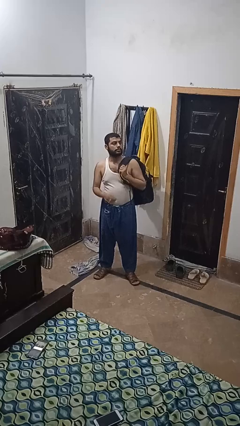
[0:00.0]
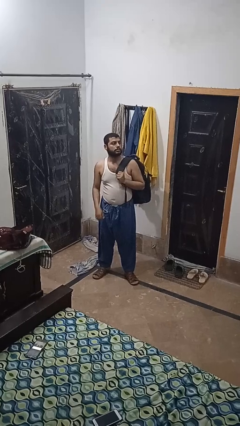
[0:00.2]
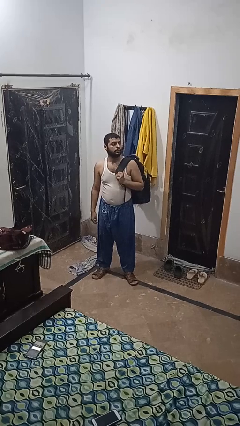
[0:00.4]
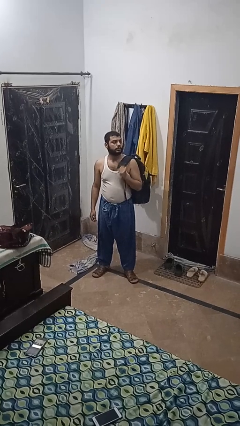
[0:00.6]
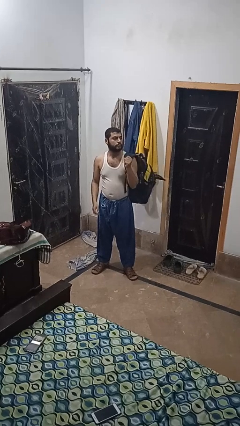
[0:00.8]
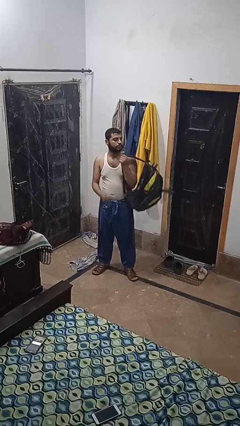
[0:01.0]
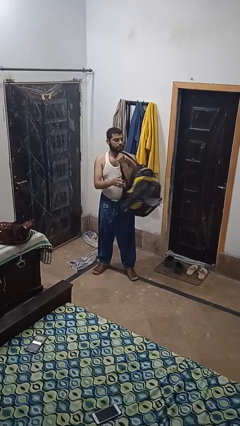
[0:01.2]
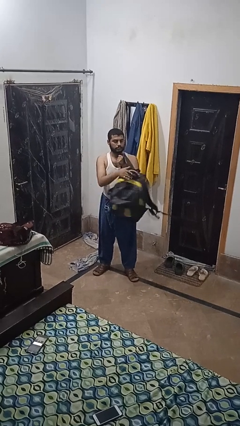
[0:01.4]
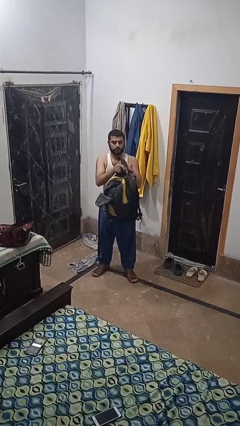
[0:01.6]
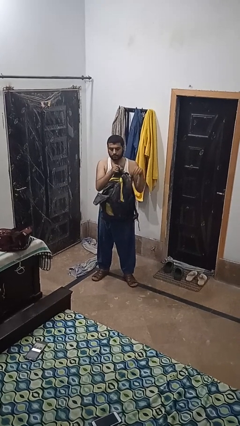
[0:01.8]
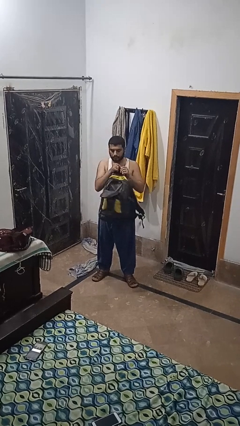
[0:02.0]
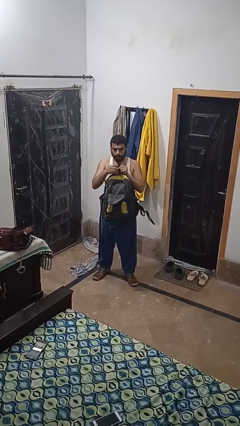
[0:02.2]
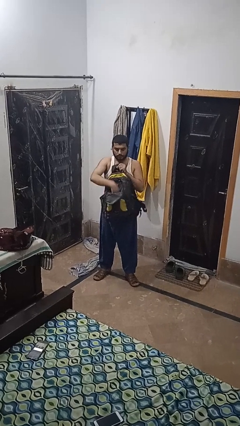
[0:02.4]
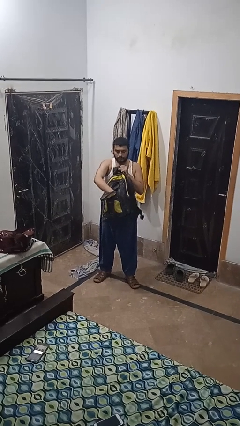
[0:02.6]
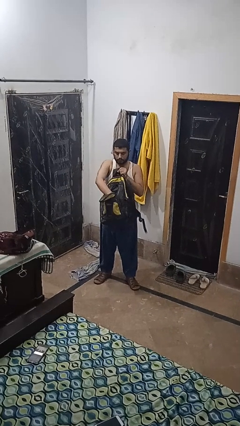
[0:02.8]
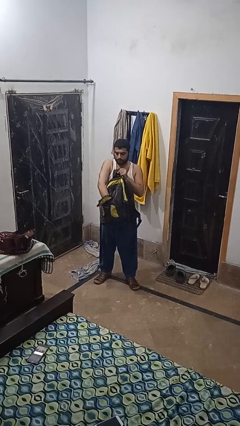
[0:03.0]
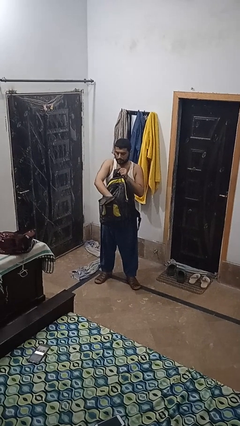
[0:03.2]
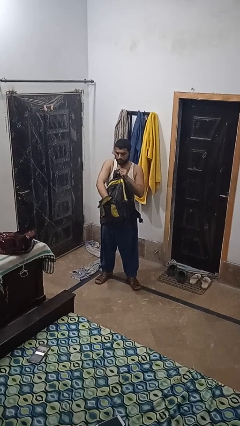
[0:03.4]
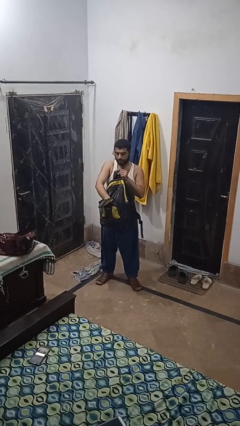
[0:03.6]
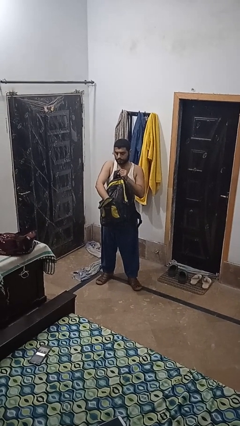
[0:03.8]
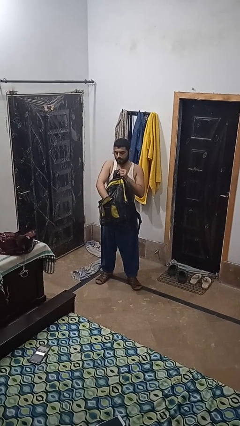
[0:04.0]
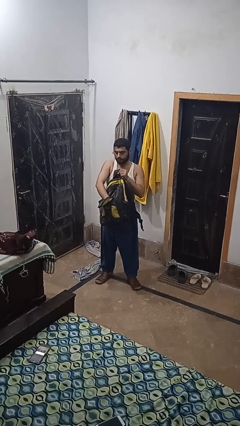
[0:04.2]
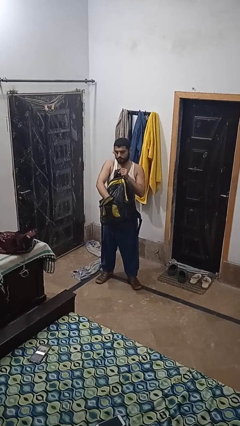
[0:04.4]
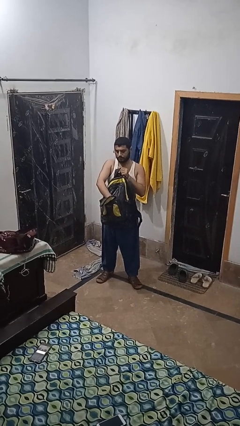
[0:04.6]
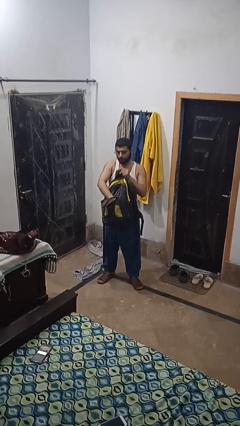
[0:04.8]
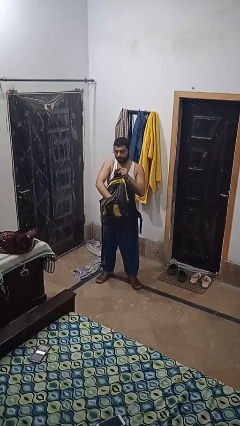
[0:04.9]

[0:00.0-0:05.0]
person searches in backpack

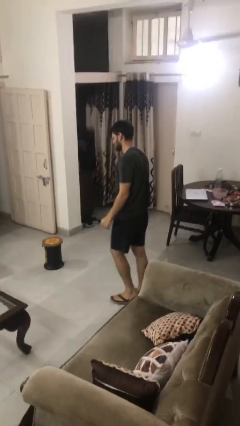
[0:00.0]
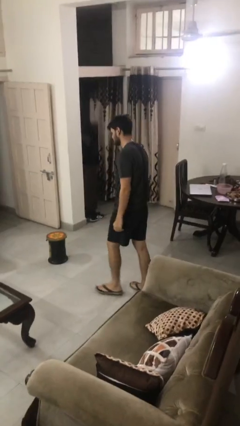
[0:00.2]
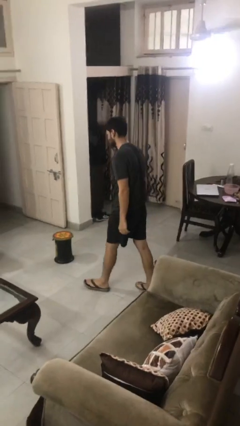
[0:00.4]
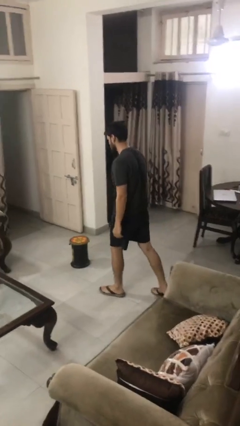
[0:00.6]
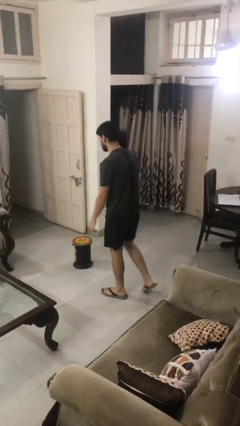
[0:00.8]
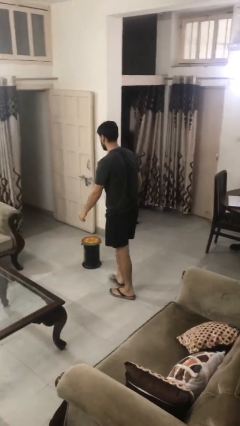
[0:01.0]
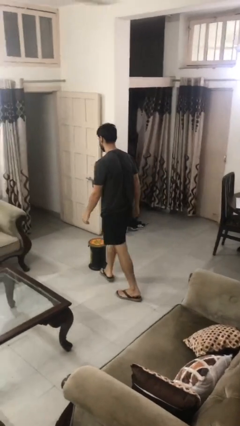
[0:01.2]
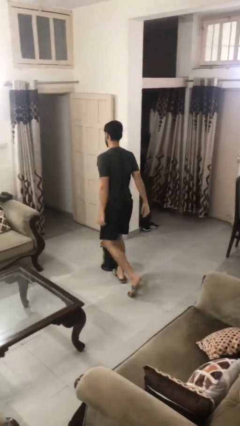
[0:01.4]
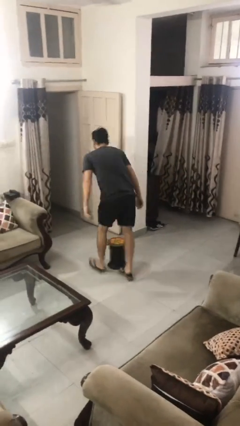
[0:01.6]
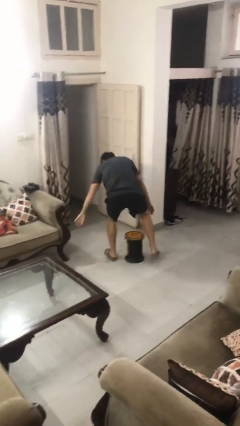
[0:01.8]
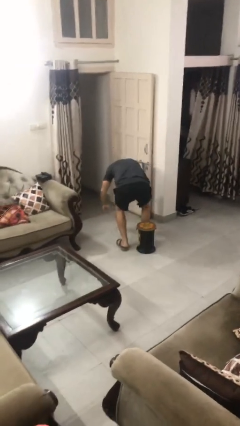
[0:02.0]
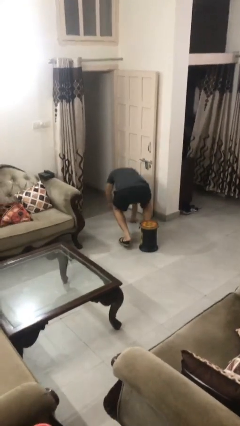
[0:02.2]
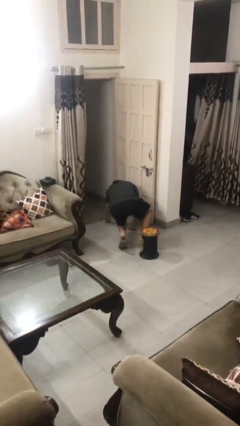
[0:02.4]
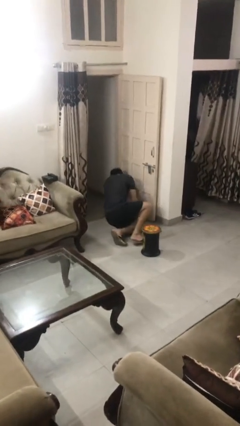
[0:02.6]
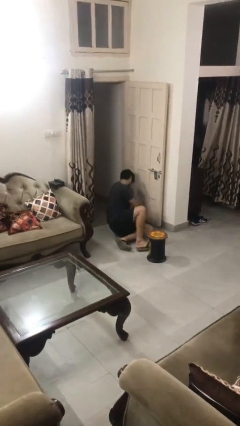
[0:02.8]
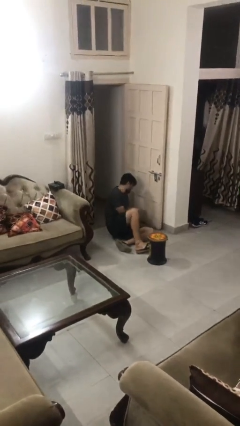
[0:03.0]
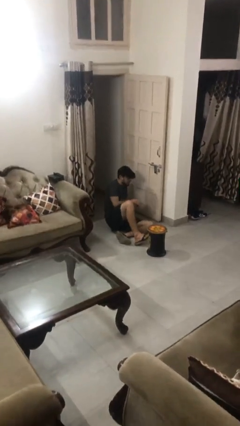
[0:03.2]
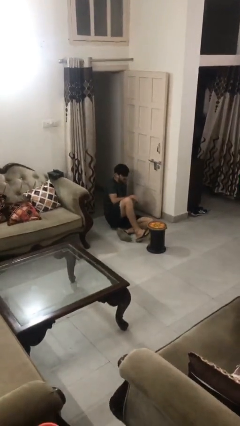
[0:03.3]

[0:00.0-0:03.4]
person trips on object on floor

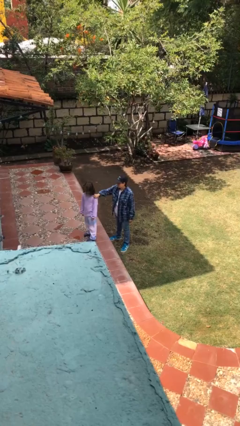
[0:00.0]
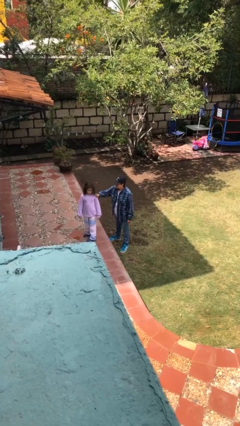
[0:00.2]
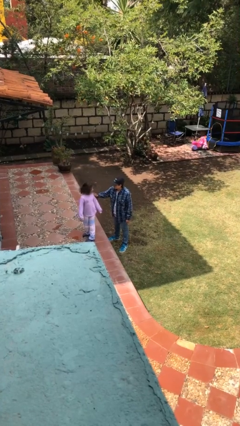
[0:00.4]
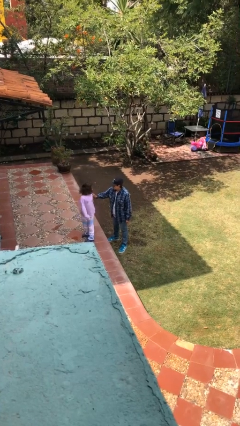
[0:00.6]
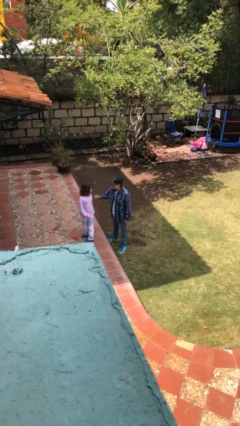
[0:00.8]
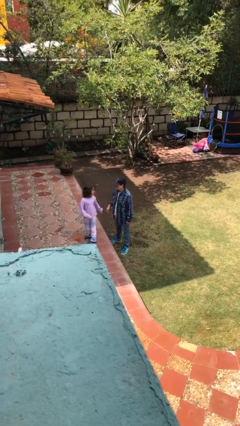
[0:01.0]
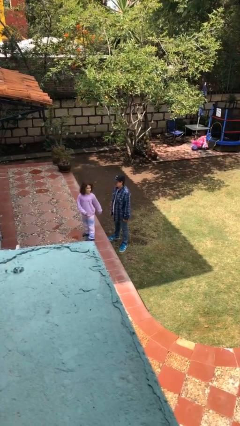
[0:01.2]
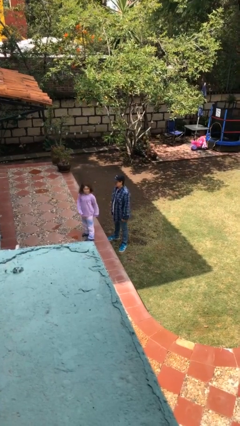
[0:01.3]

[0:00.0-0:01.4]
person spins person around

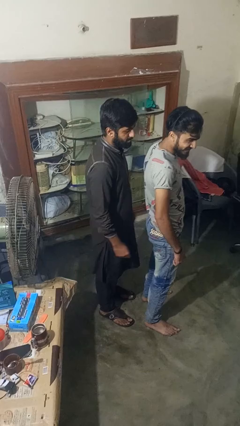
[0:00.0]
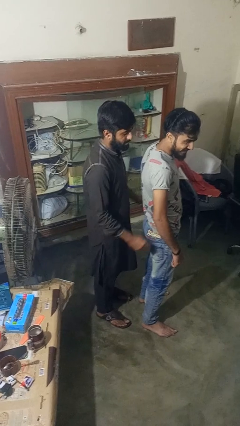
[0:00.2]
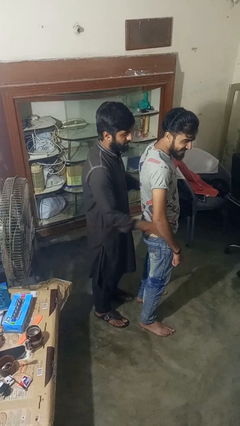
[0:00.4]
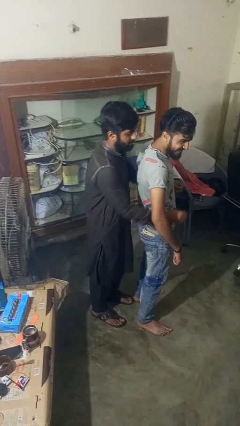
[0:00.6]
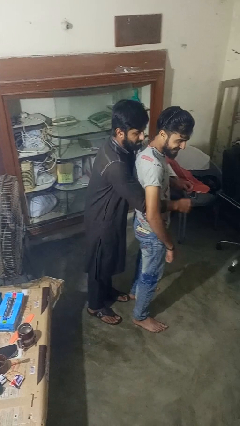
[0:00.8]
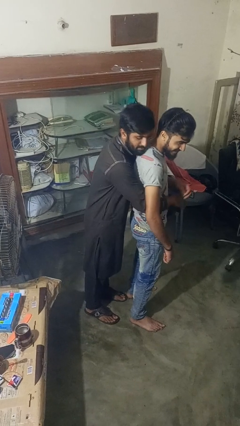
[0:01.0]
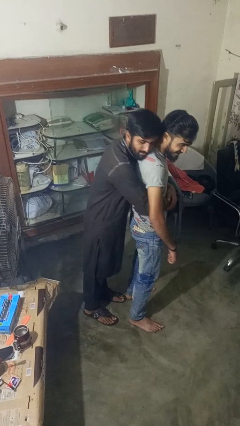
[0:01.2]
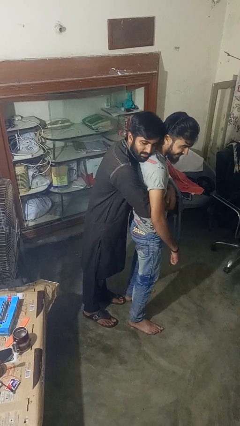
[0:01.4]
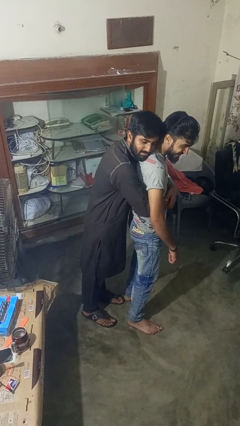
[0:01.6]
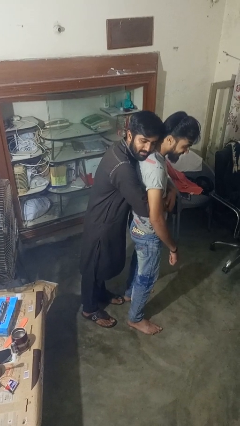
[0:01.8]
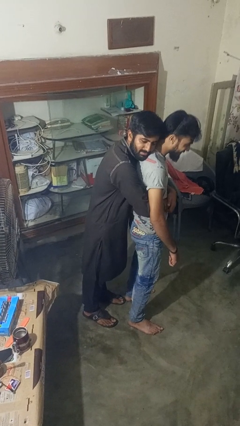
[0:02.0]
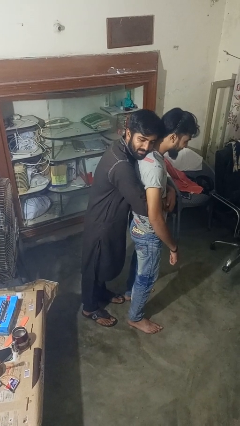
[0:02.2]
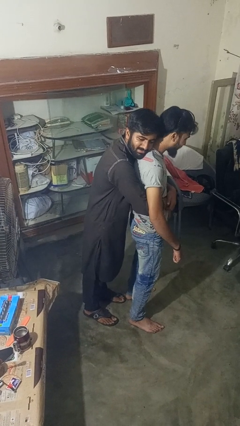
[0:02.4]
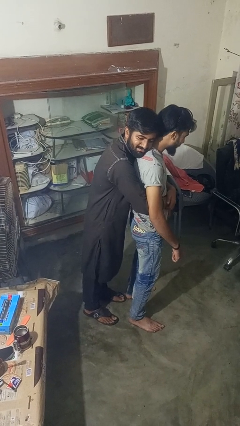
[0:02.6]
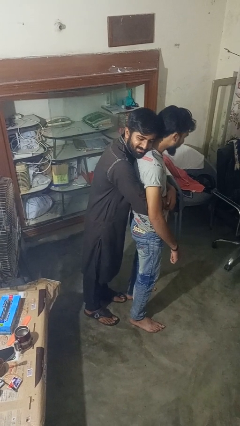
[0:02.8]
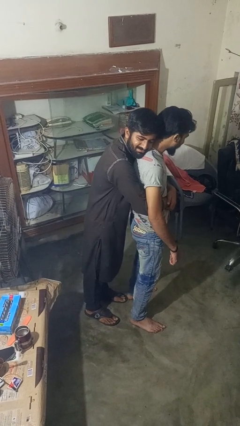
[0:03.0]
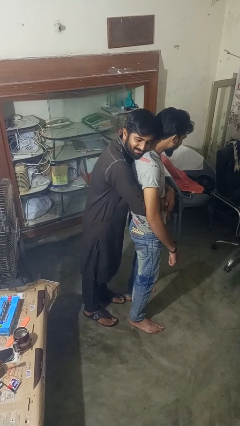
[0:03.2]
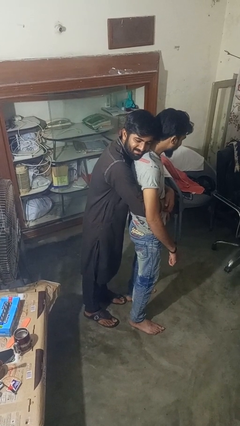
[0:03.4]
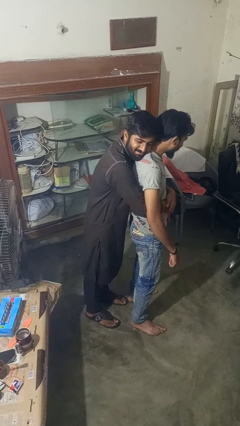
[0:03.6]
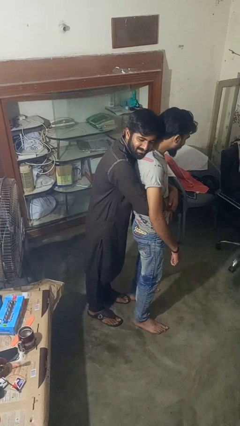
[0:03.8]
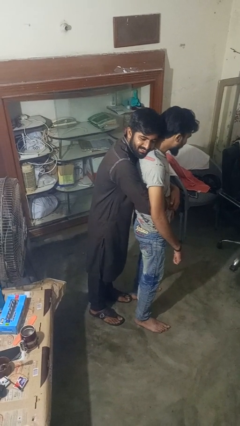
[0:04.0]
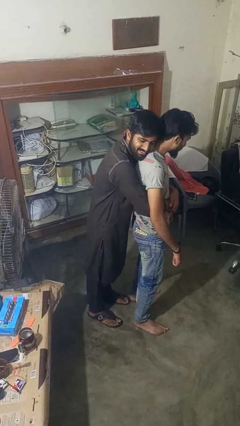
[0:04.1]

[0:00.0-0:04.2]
person hugs person from behind

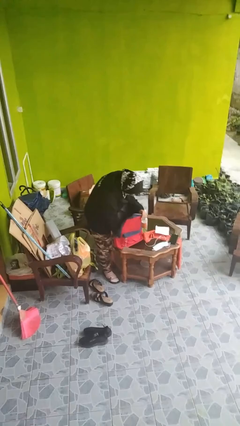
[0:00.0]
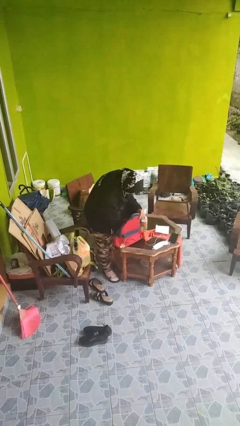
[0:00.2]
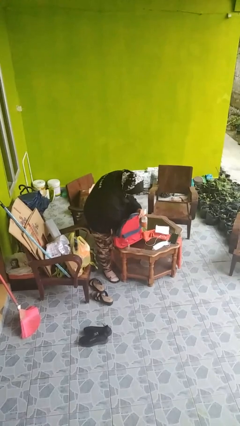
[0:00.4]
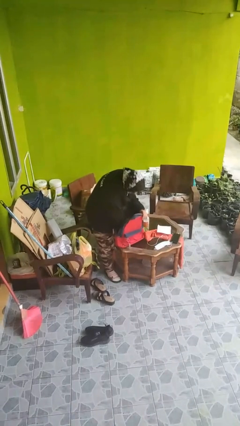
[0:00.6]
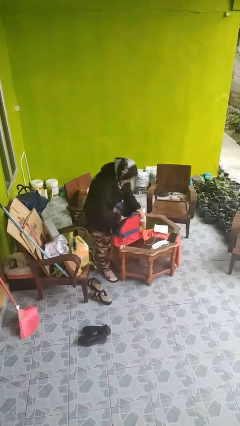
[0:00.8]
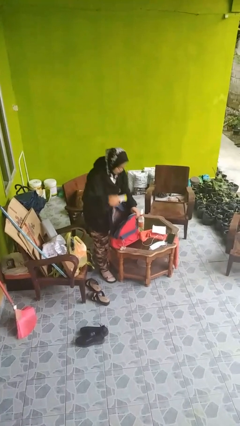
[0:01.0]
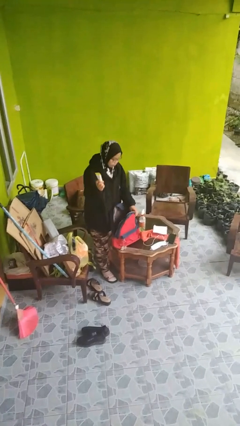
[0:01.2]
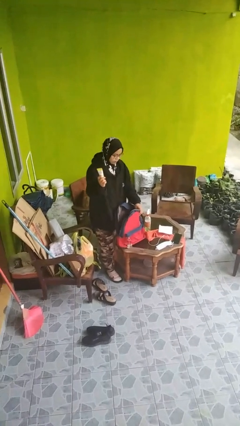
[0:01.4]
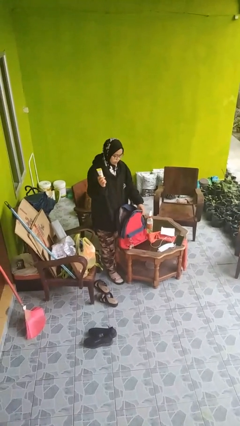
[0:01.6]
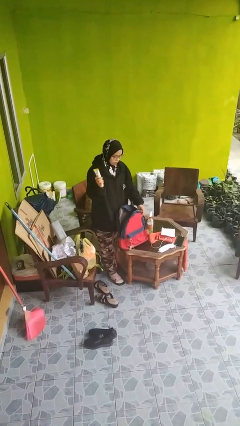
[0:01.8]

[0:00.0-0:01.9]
person takes object from backpack

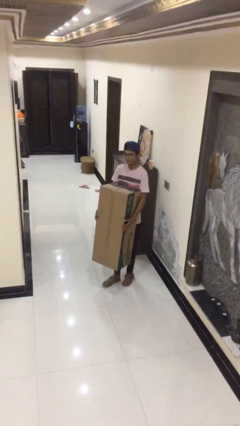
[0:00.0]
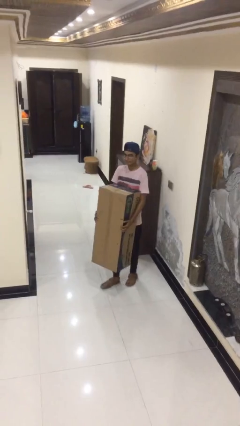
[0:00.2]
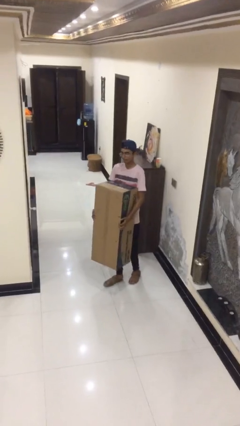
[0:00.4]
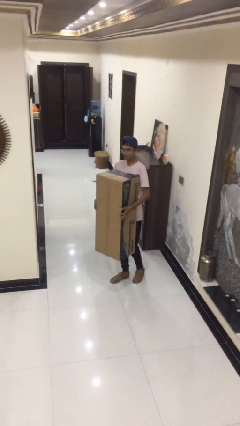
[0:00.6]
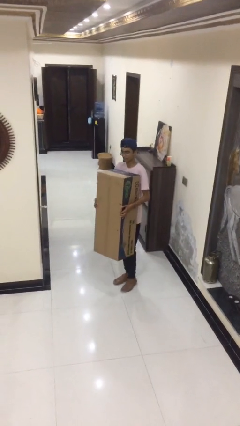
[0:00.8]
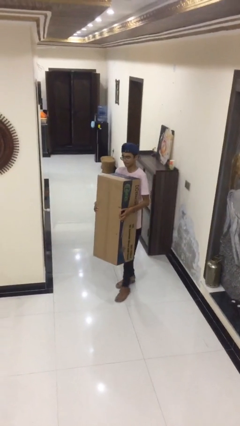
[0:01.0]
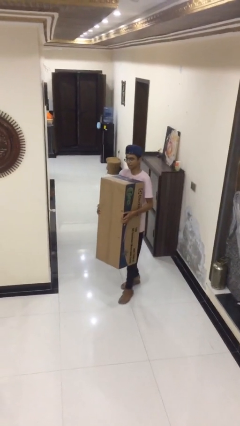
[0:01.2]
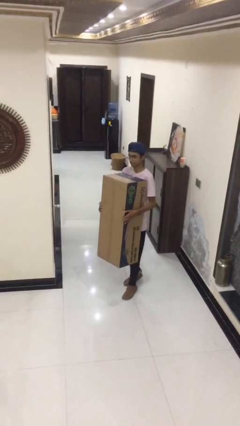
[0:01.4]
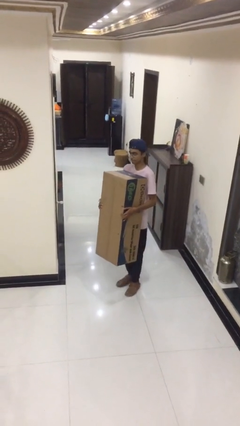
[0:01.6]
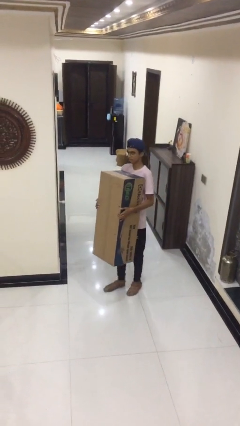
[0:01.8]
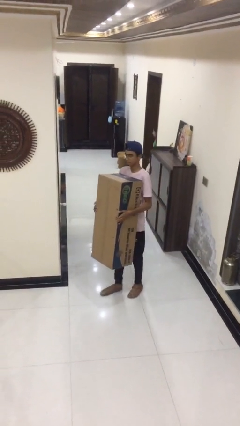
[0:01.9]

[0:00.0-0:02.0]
person carries heavy object
